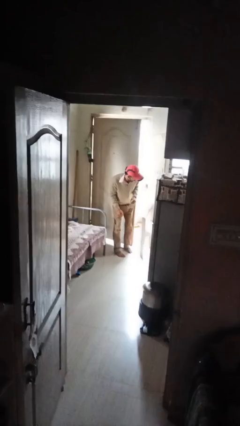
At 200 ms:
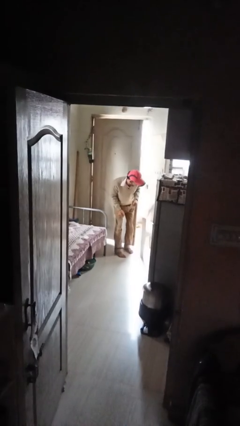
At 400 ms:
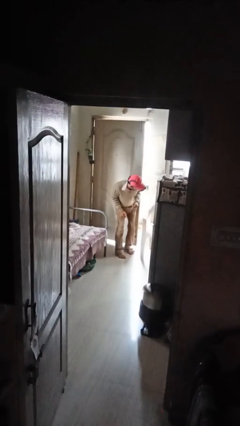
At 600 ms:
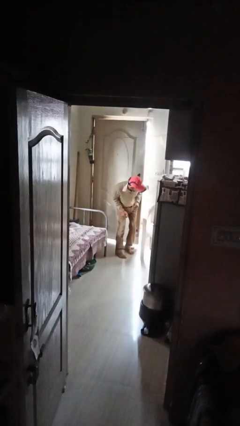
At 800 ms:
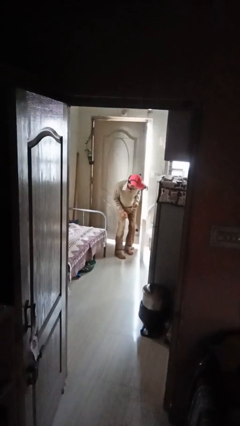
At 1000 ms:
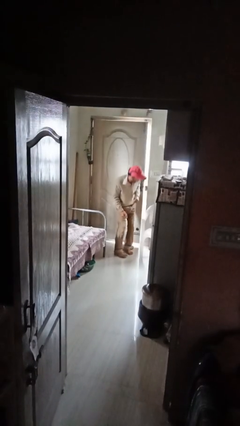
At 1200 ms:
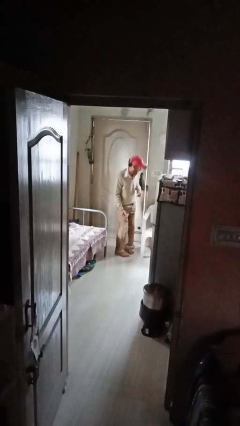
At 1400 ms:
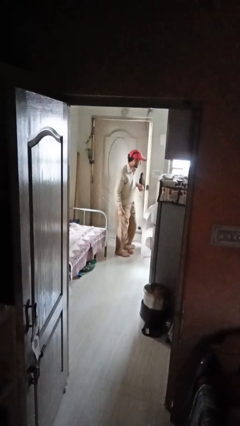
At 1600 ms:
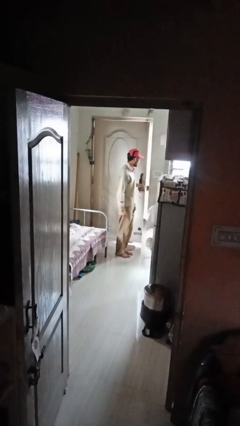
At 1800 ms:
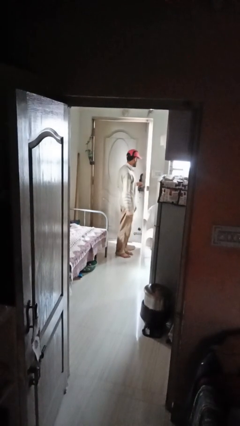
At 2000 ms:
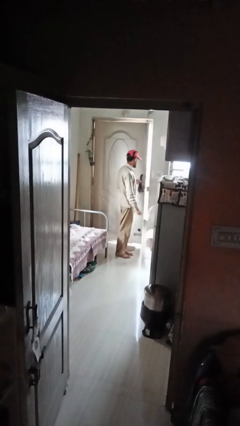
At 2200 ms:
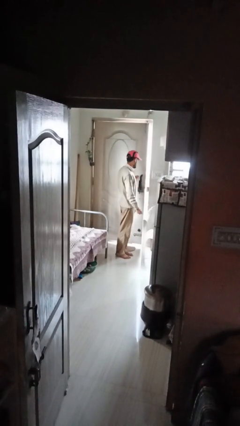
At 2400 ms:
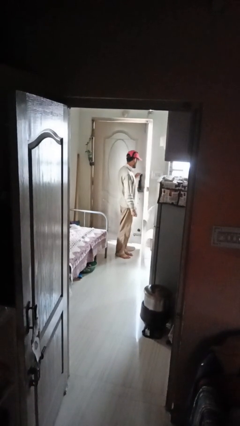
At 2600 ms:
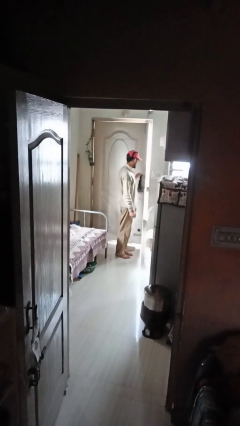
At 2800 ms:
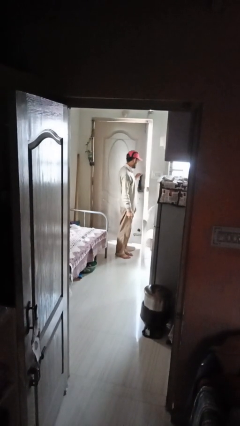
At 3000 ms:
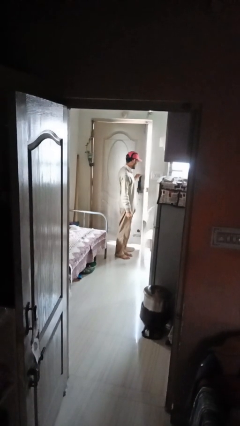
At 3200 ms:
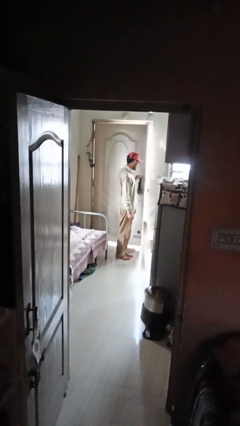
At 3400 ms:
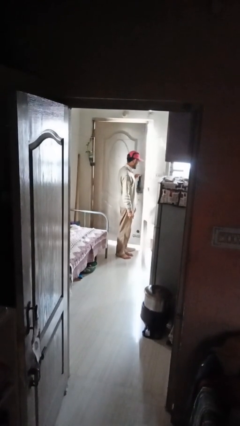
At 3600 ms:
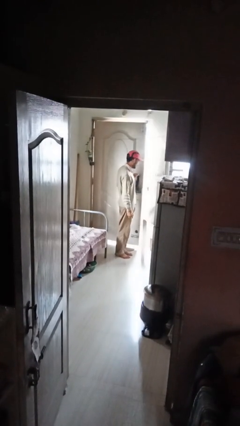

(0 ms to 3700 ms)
person closes door with hip

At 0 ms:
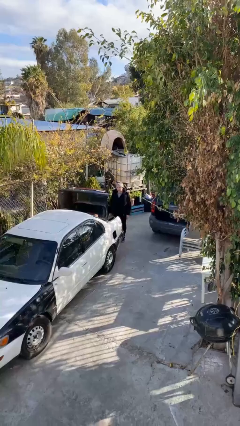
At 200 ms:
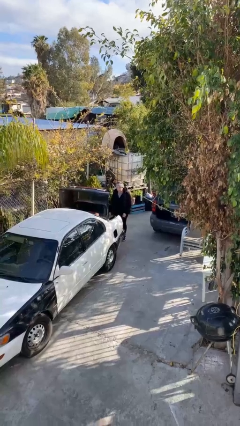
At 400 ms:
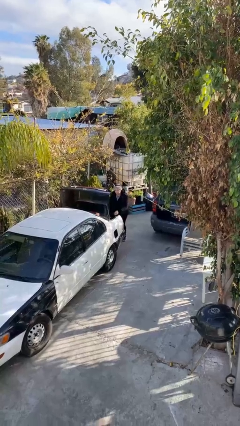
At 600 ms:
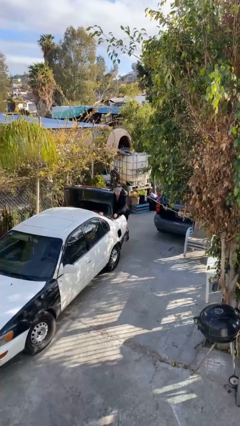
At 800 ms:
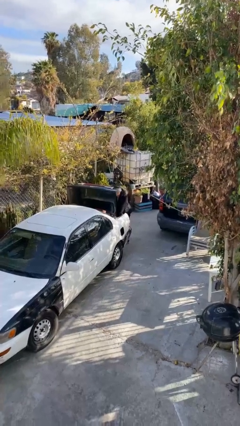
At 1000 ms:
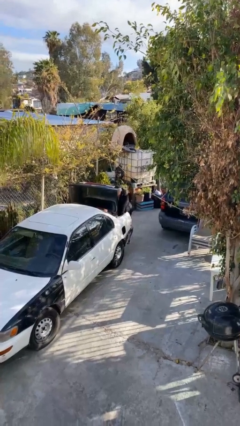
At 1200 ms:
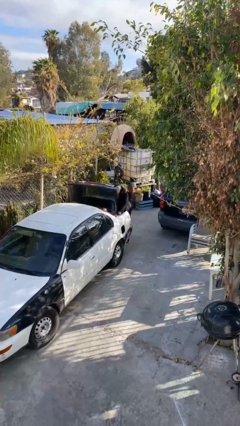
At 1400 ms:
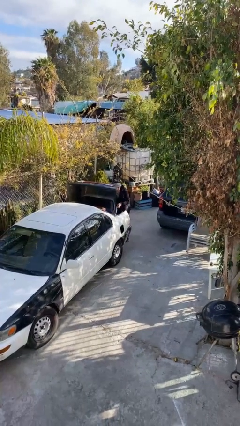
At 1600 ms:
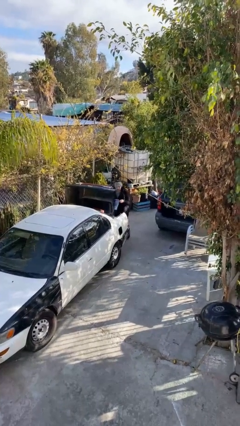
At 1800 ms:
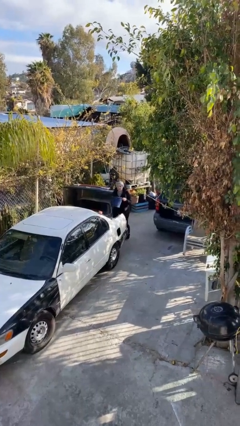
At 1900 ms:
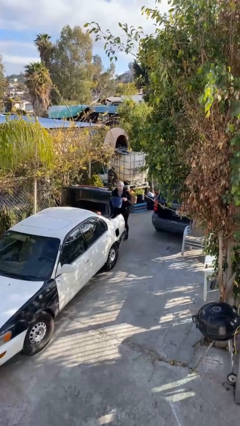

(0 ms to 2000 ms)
person unloads car

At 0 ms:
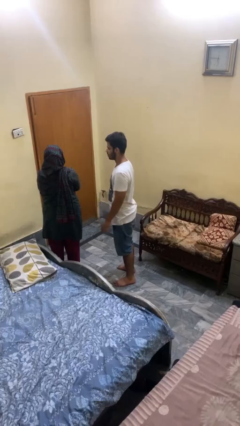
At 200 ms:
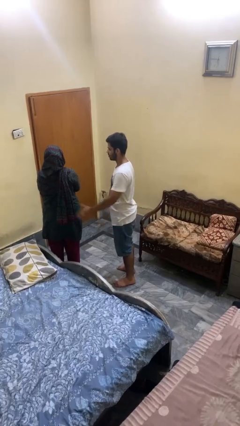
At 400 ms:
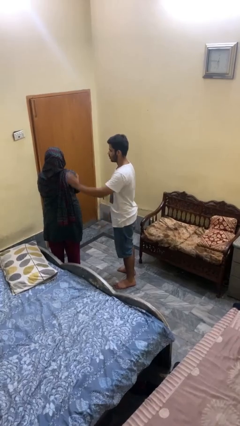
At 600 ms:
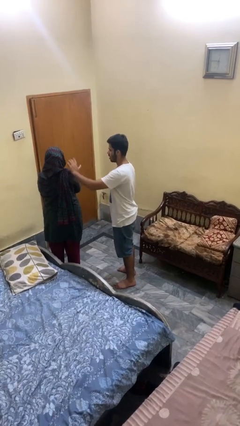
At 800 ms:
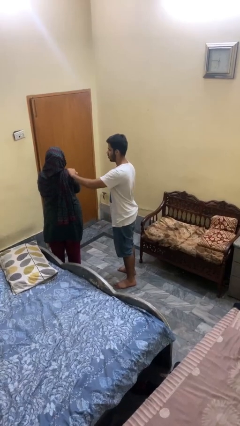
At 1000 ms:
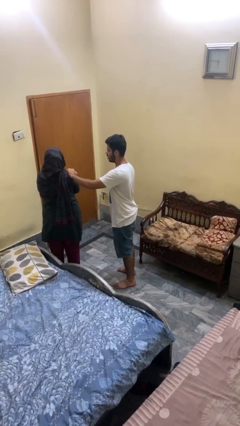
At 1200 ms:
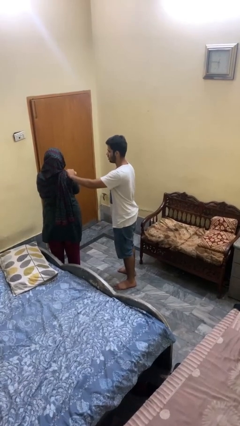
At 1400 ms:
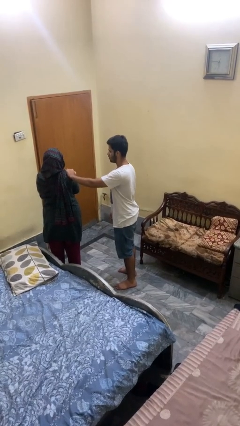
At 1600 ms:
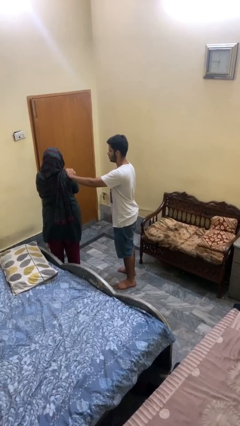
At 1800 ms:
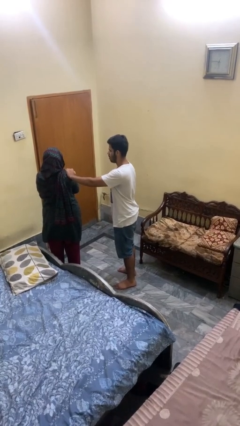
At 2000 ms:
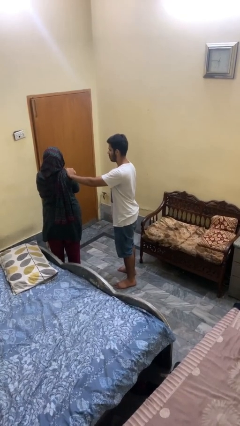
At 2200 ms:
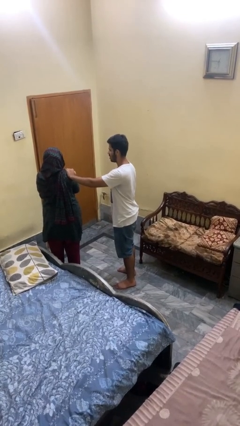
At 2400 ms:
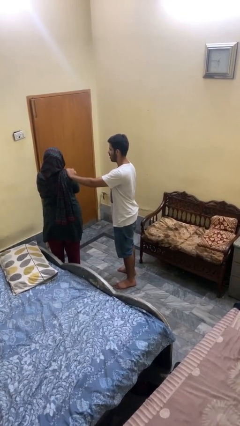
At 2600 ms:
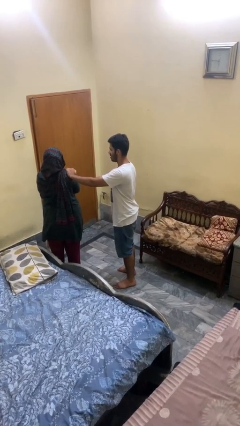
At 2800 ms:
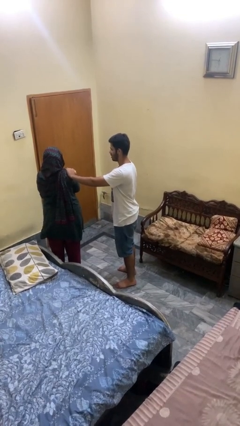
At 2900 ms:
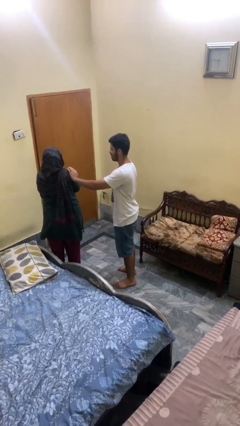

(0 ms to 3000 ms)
person pounds shoulders of person

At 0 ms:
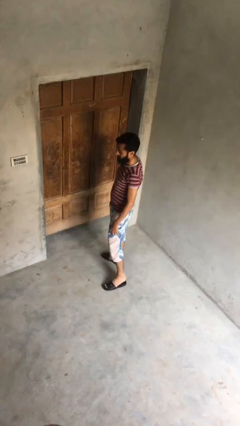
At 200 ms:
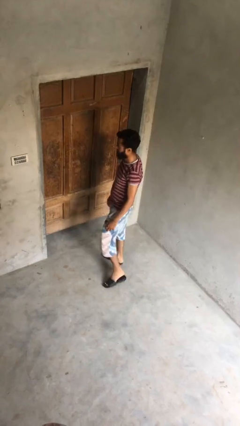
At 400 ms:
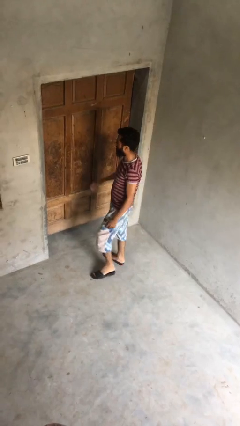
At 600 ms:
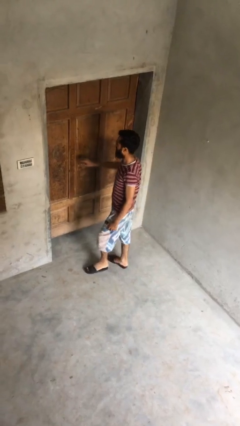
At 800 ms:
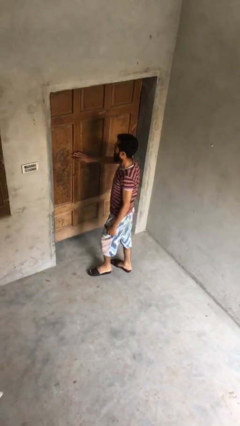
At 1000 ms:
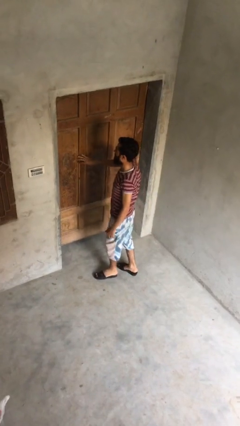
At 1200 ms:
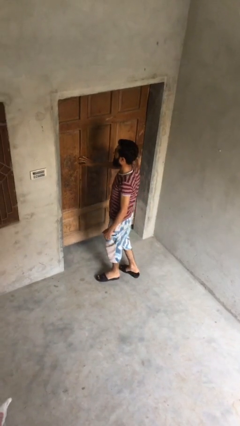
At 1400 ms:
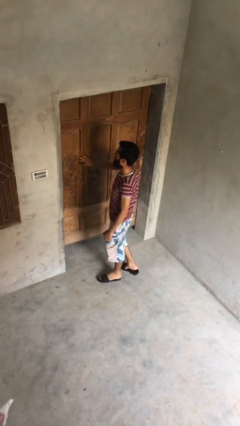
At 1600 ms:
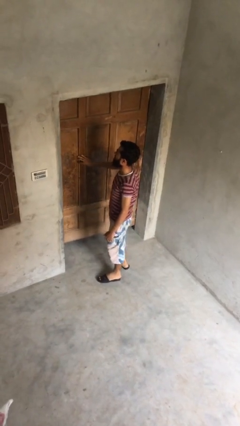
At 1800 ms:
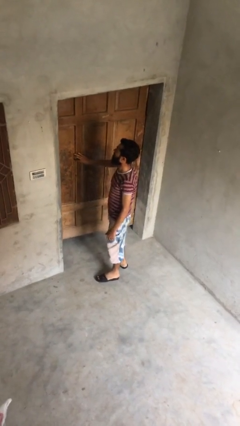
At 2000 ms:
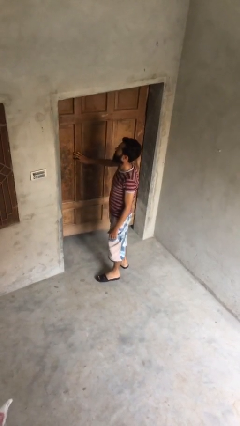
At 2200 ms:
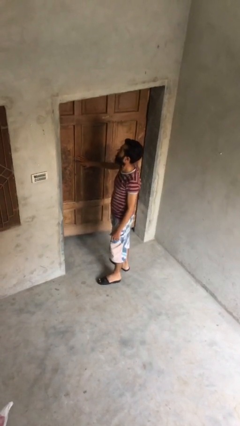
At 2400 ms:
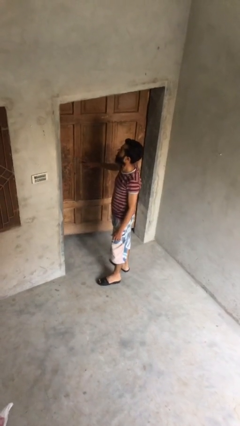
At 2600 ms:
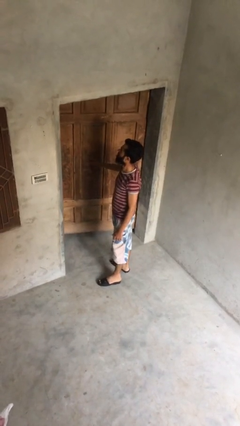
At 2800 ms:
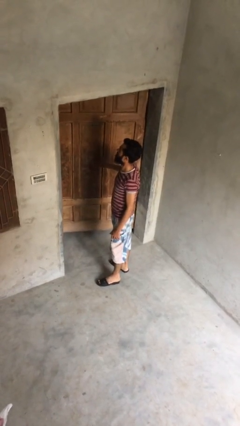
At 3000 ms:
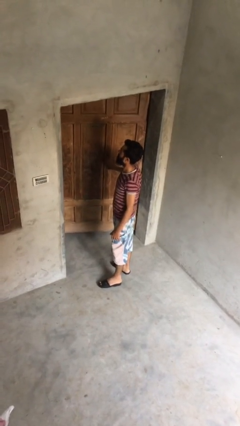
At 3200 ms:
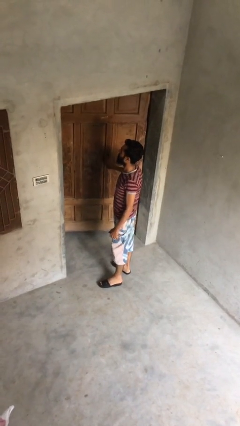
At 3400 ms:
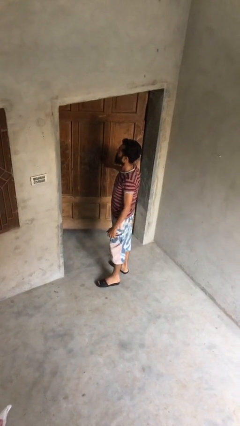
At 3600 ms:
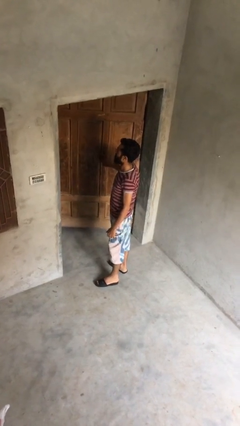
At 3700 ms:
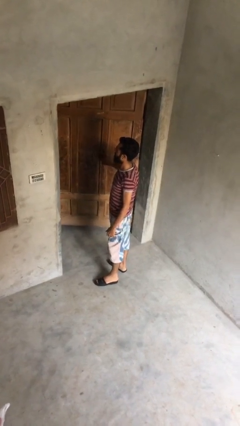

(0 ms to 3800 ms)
person opens facility door

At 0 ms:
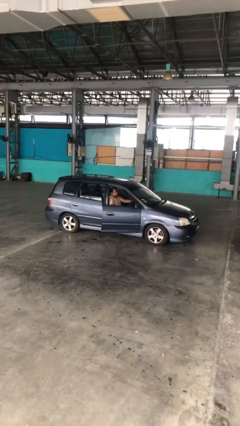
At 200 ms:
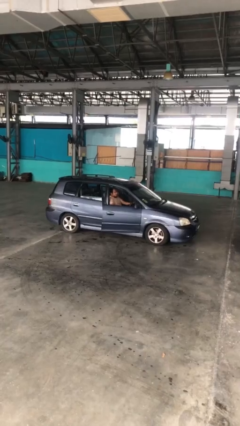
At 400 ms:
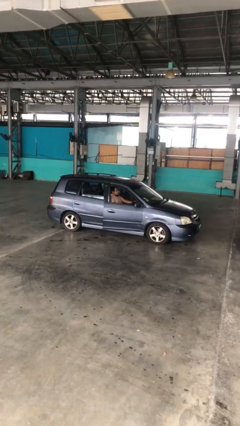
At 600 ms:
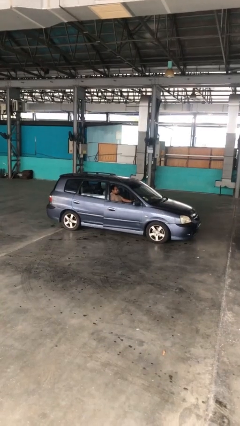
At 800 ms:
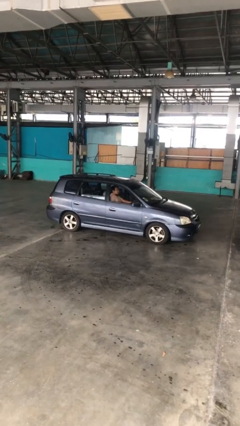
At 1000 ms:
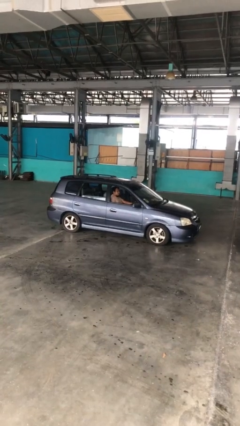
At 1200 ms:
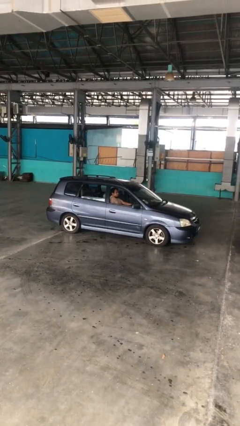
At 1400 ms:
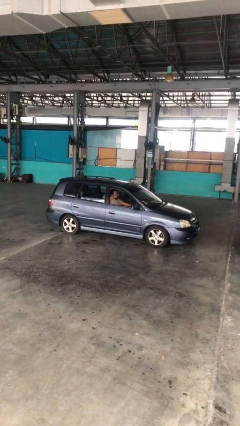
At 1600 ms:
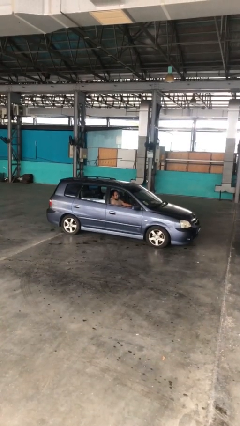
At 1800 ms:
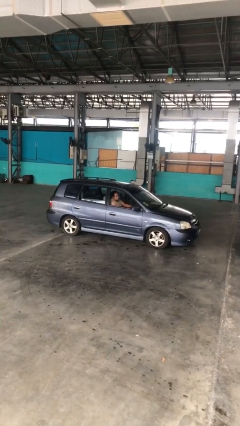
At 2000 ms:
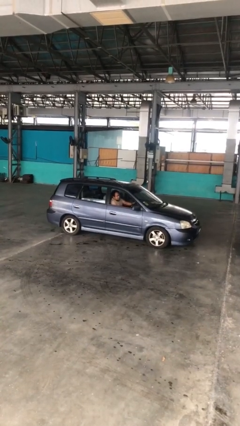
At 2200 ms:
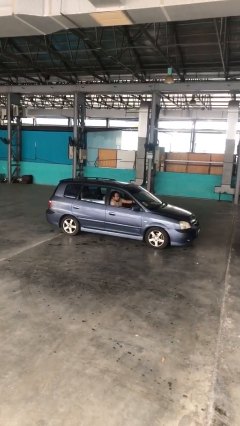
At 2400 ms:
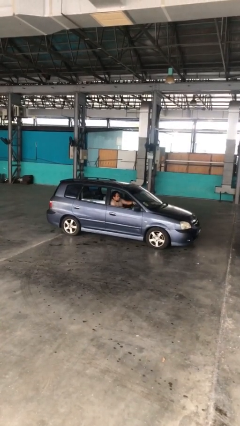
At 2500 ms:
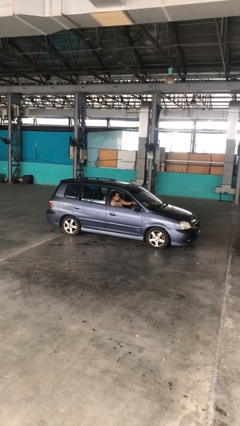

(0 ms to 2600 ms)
person closes car door

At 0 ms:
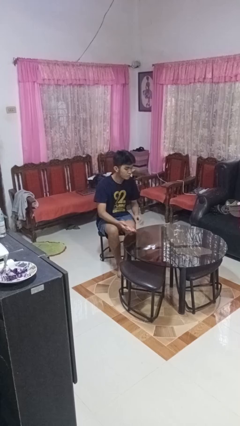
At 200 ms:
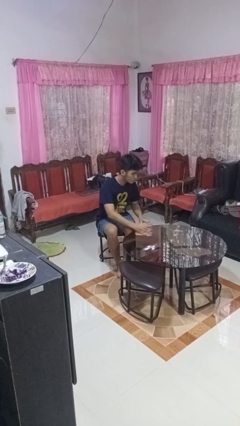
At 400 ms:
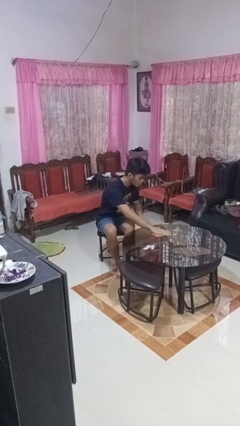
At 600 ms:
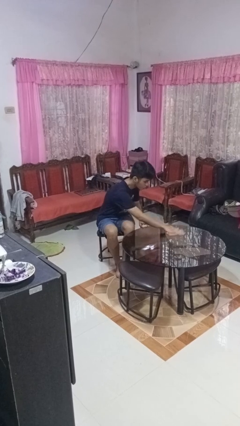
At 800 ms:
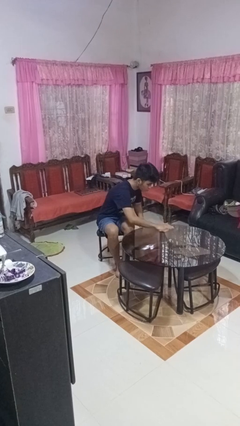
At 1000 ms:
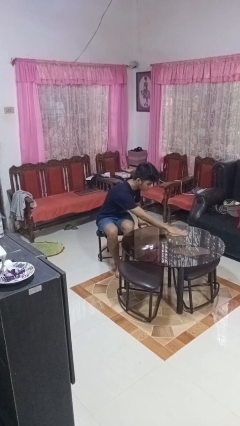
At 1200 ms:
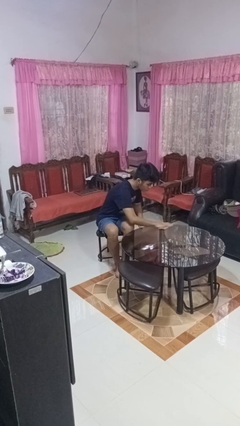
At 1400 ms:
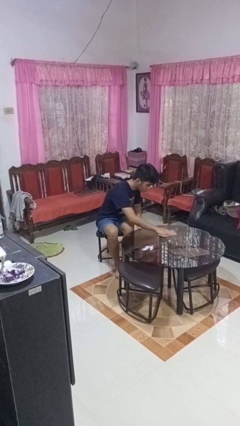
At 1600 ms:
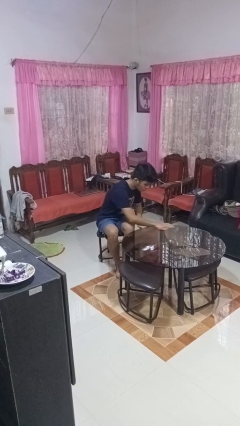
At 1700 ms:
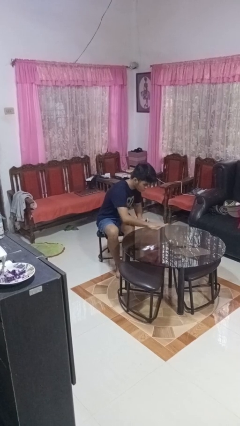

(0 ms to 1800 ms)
person cleans table with rag

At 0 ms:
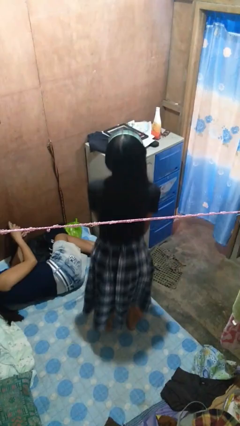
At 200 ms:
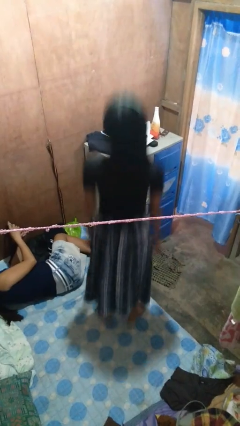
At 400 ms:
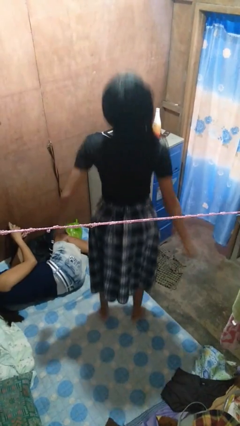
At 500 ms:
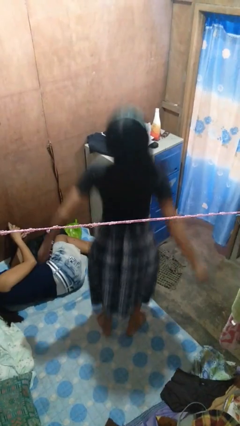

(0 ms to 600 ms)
person jumps on bed
